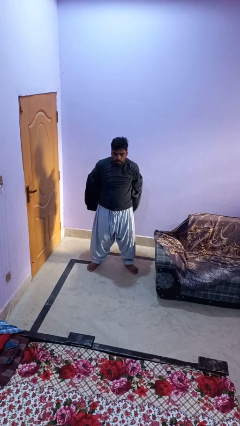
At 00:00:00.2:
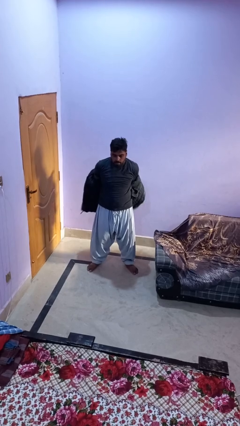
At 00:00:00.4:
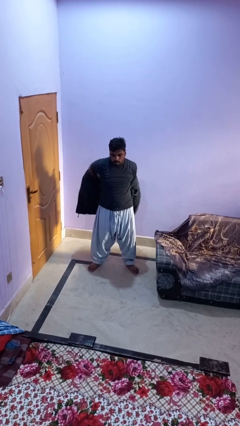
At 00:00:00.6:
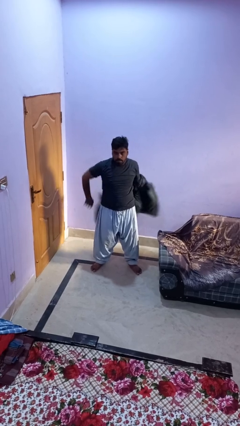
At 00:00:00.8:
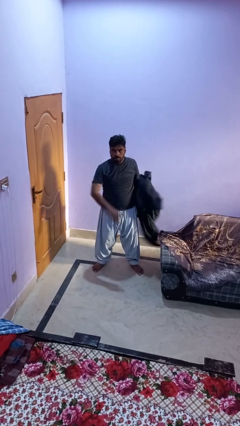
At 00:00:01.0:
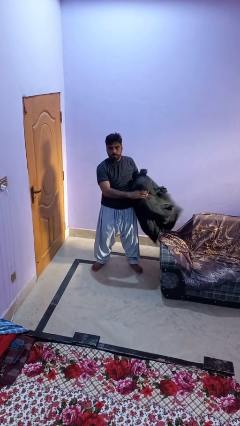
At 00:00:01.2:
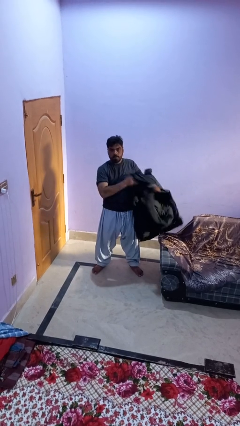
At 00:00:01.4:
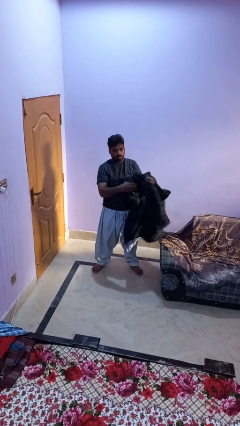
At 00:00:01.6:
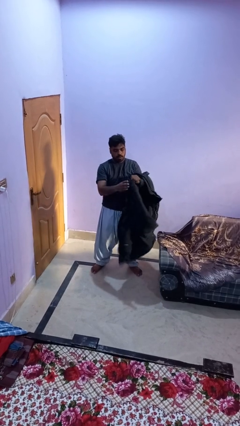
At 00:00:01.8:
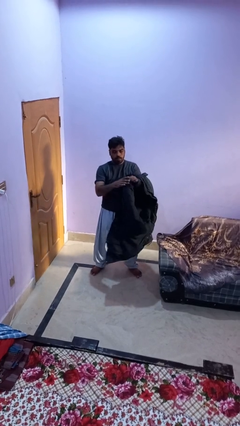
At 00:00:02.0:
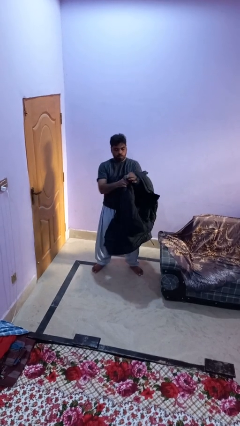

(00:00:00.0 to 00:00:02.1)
person takes off jacket

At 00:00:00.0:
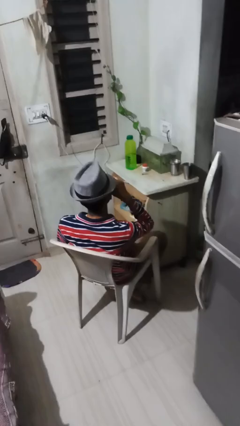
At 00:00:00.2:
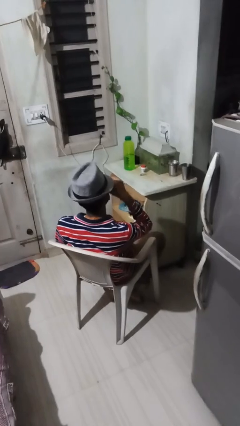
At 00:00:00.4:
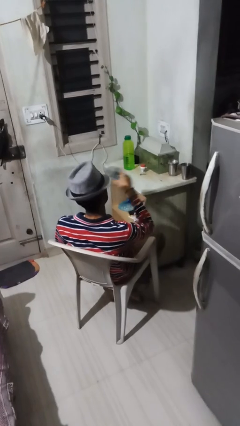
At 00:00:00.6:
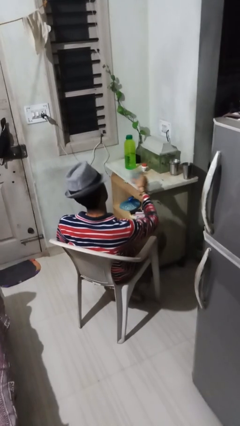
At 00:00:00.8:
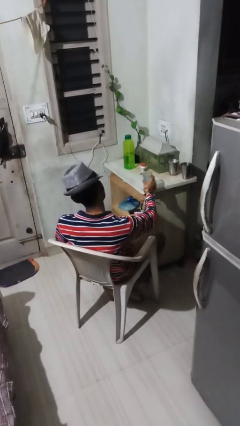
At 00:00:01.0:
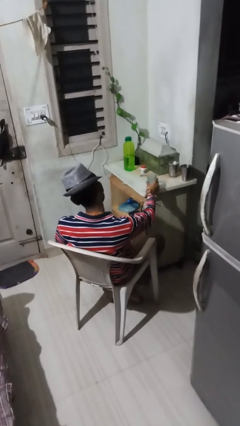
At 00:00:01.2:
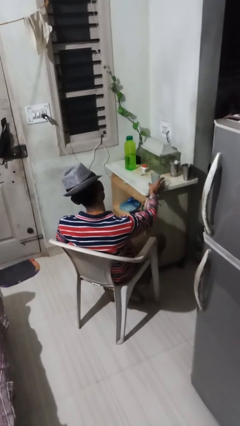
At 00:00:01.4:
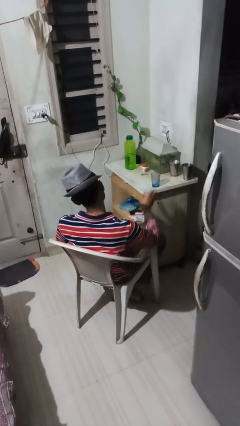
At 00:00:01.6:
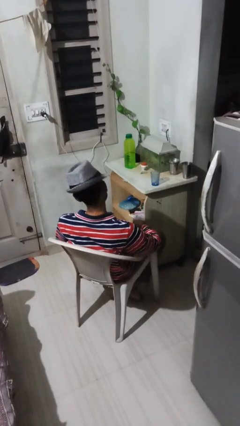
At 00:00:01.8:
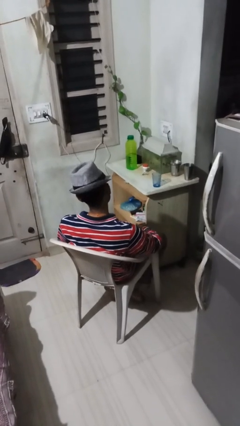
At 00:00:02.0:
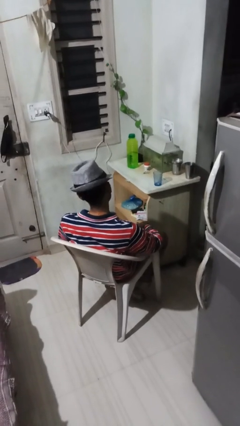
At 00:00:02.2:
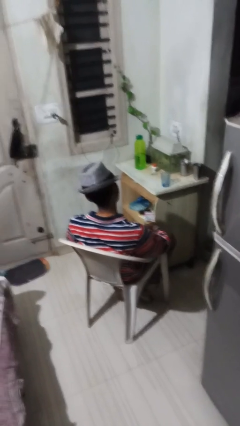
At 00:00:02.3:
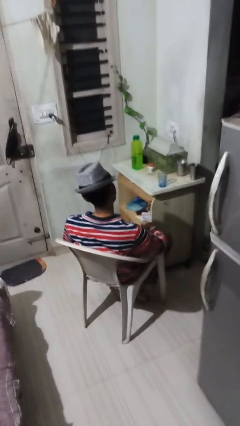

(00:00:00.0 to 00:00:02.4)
person puts down object on table

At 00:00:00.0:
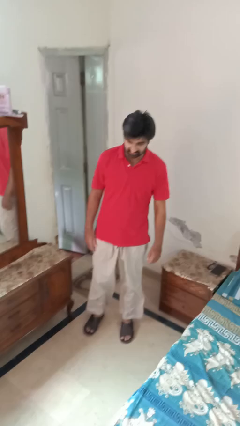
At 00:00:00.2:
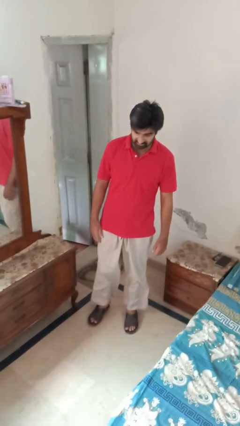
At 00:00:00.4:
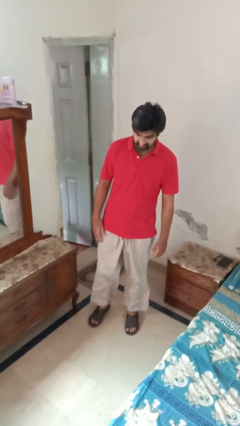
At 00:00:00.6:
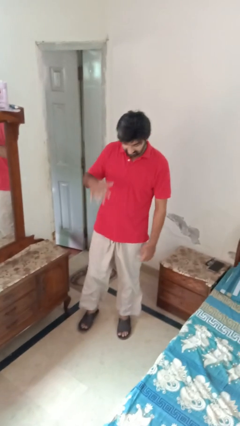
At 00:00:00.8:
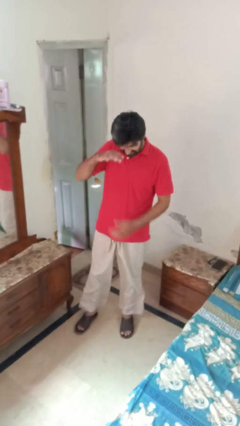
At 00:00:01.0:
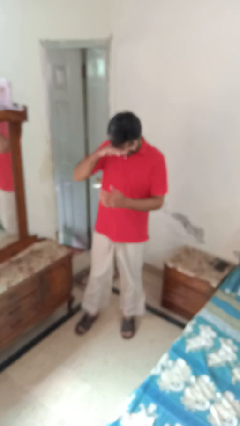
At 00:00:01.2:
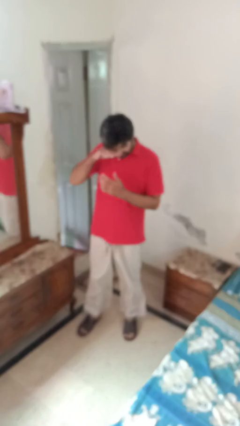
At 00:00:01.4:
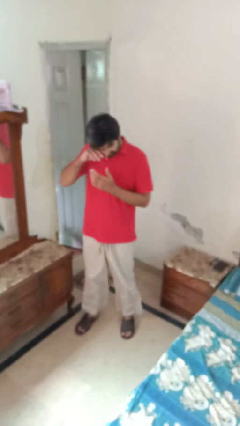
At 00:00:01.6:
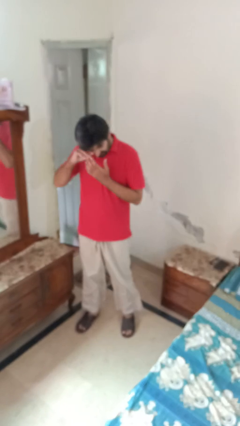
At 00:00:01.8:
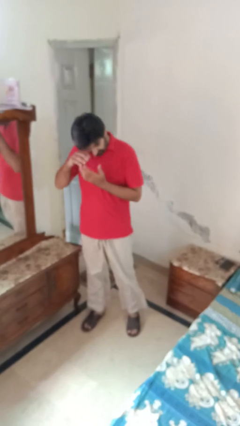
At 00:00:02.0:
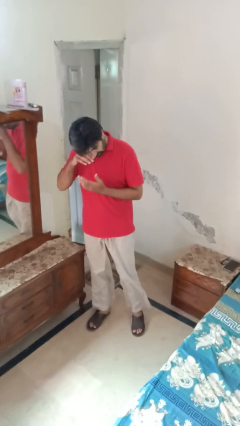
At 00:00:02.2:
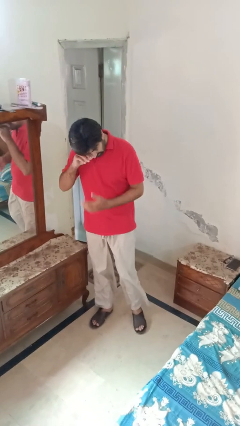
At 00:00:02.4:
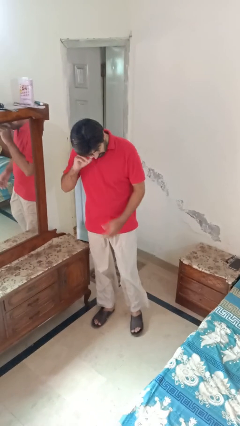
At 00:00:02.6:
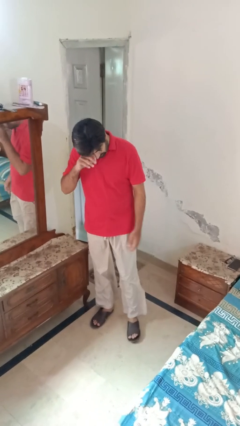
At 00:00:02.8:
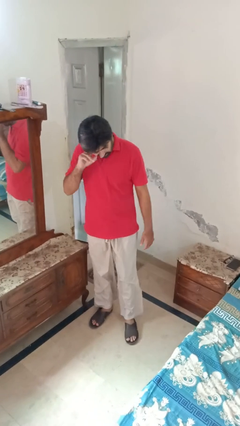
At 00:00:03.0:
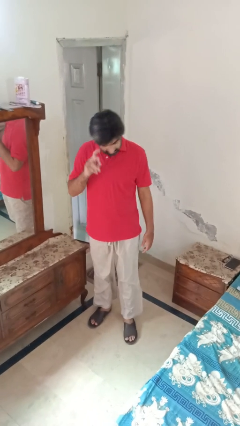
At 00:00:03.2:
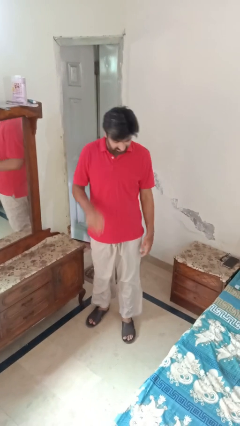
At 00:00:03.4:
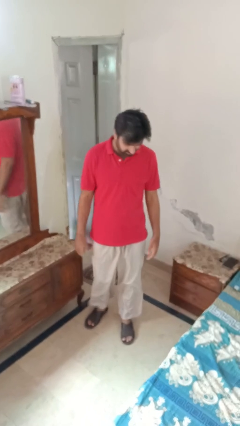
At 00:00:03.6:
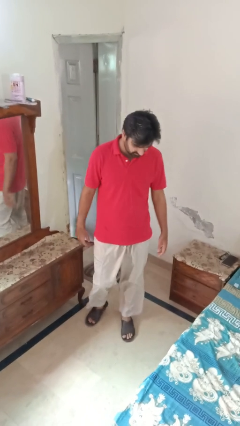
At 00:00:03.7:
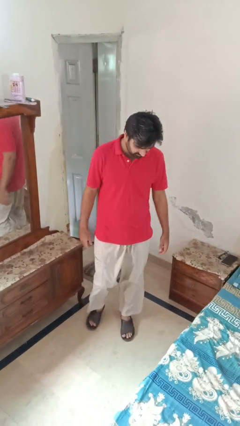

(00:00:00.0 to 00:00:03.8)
person rubs eyes

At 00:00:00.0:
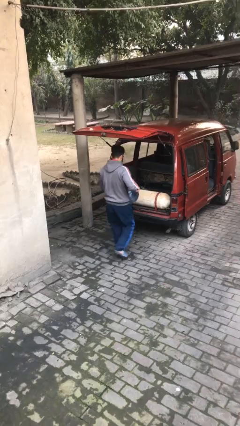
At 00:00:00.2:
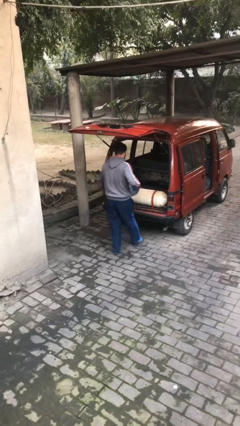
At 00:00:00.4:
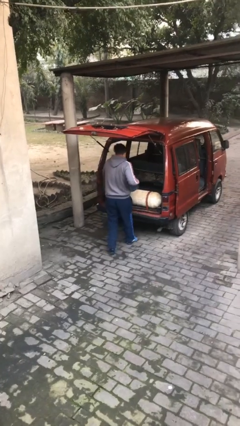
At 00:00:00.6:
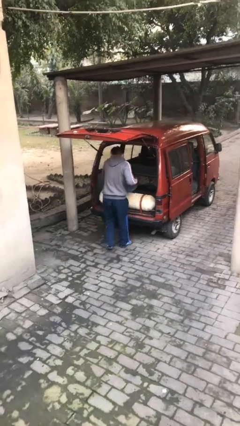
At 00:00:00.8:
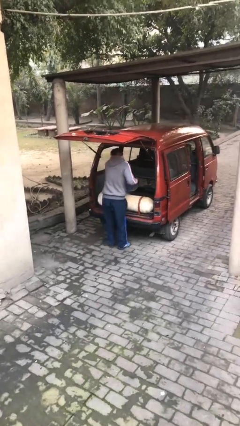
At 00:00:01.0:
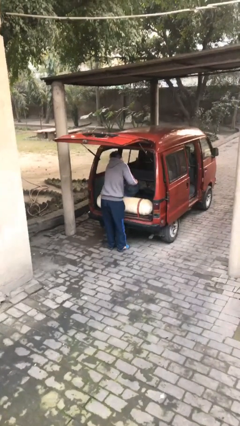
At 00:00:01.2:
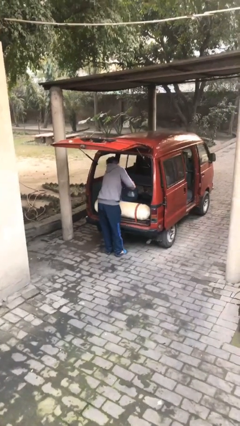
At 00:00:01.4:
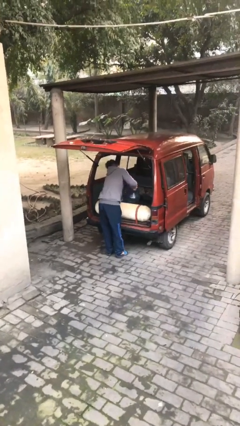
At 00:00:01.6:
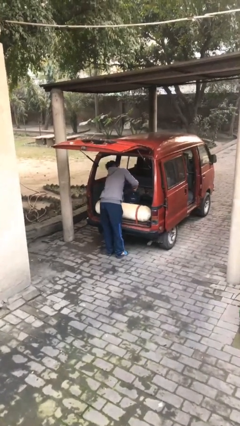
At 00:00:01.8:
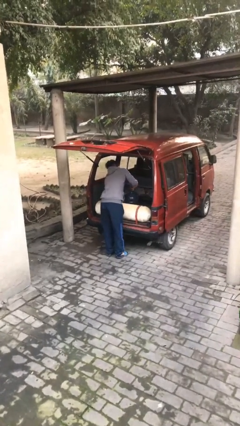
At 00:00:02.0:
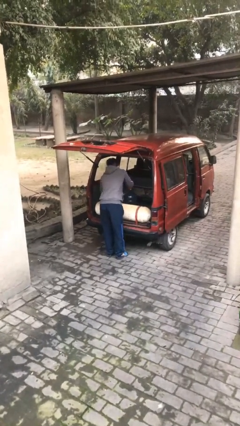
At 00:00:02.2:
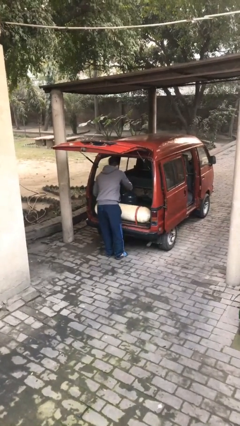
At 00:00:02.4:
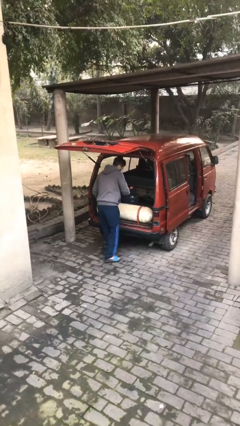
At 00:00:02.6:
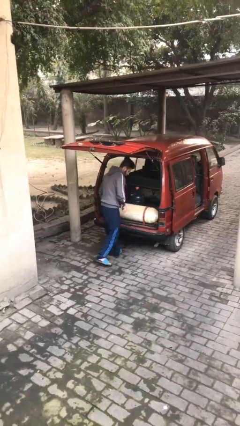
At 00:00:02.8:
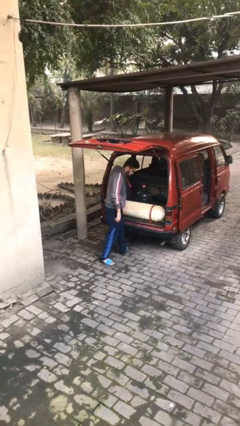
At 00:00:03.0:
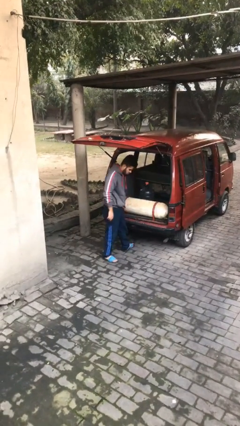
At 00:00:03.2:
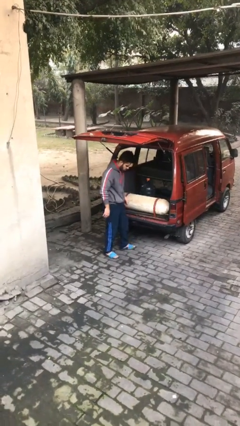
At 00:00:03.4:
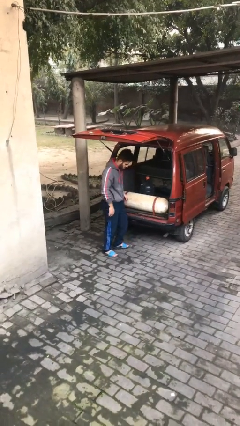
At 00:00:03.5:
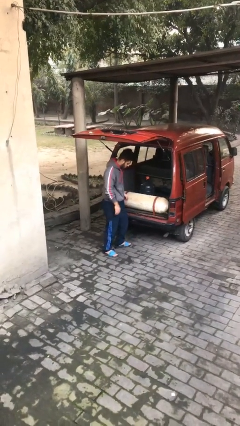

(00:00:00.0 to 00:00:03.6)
person loads car

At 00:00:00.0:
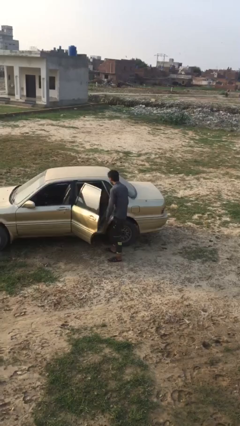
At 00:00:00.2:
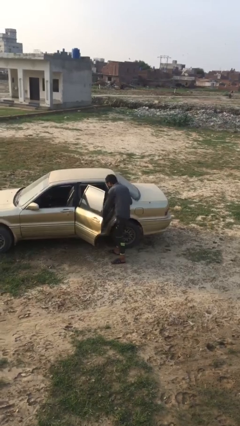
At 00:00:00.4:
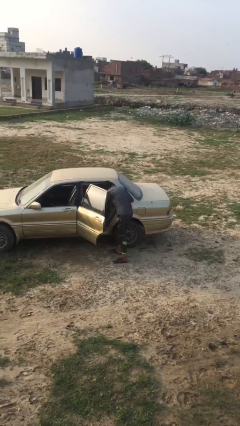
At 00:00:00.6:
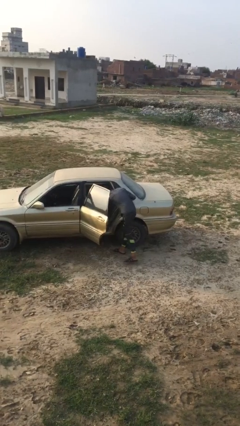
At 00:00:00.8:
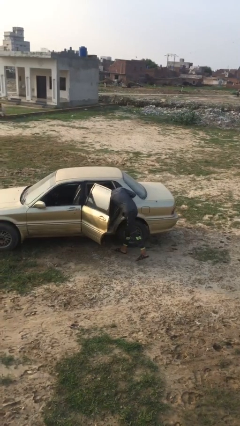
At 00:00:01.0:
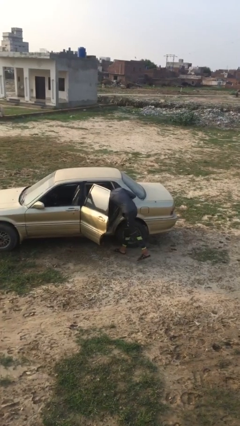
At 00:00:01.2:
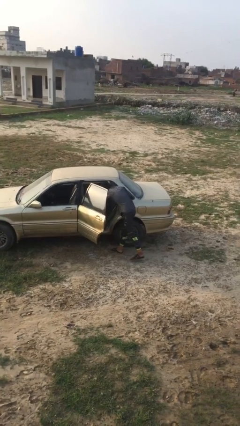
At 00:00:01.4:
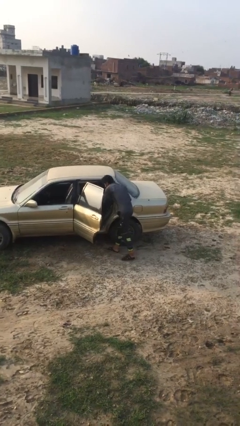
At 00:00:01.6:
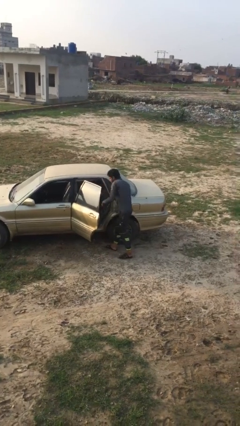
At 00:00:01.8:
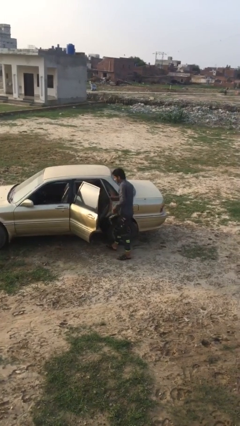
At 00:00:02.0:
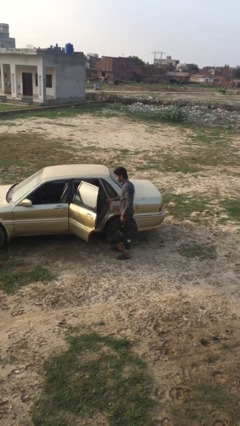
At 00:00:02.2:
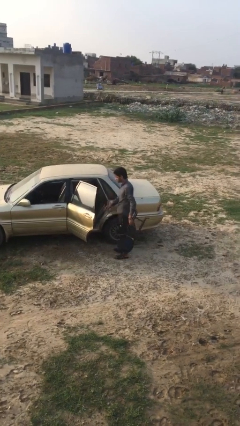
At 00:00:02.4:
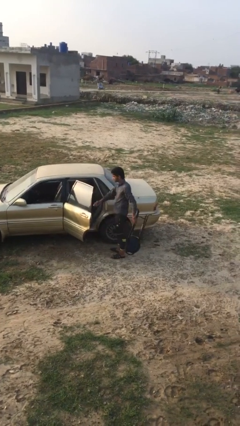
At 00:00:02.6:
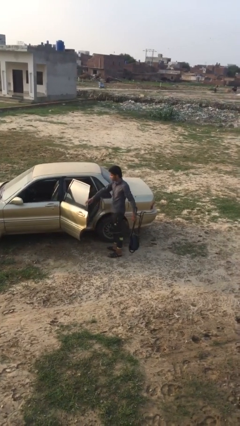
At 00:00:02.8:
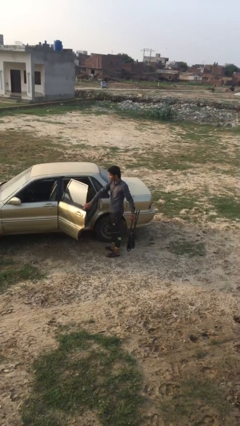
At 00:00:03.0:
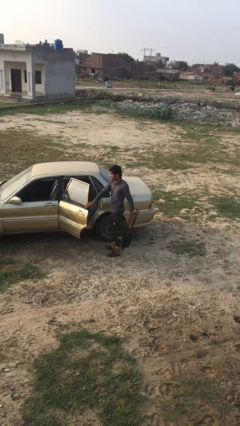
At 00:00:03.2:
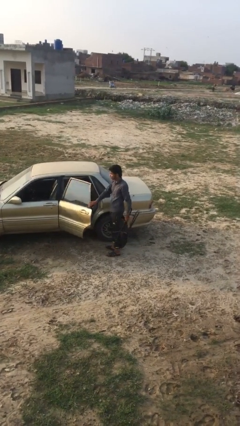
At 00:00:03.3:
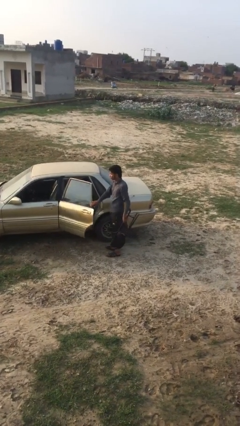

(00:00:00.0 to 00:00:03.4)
person unloads car

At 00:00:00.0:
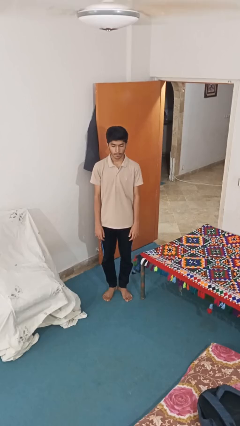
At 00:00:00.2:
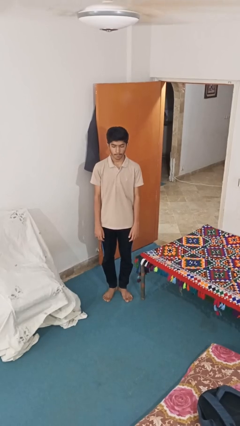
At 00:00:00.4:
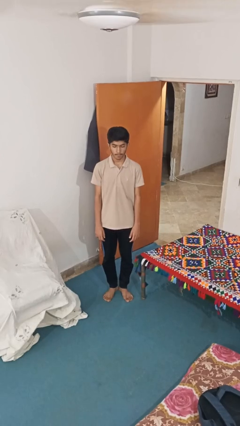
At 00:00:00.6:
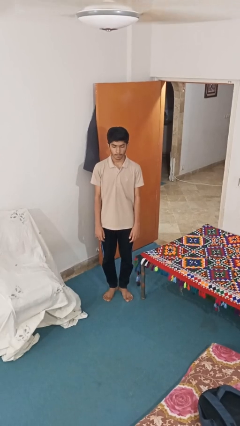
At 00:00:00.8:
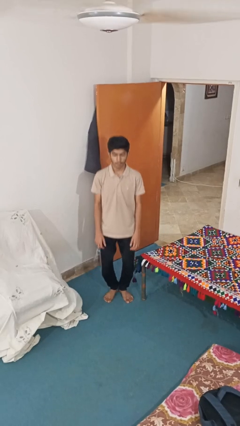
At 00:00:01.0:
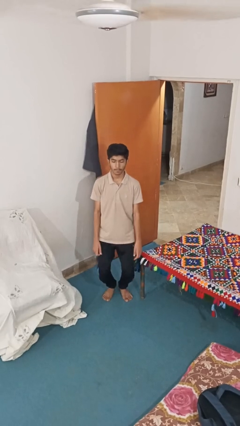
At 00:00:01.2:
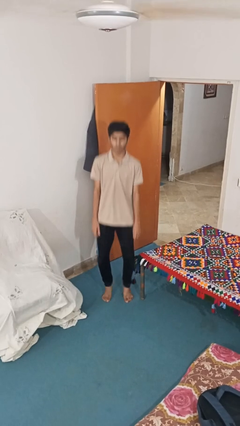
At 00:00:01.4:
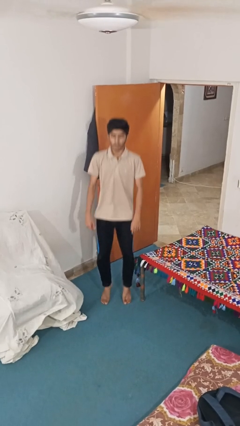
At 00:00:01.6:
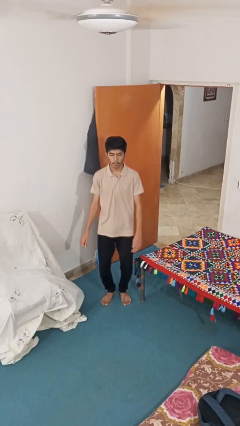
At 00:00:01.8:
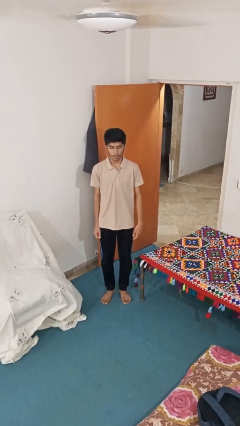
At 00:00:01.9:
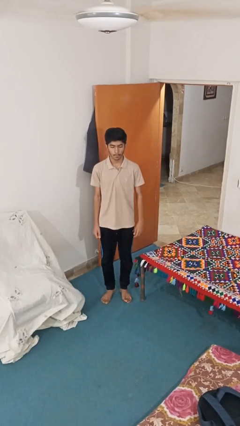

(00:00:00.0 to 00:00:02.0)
person jumps
